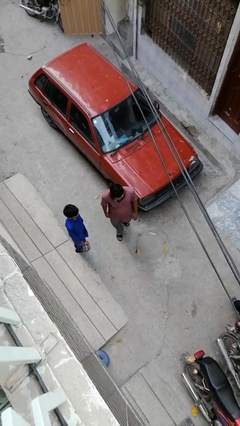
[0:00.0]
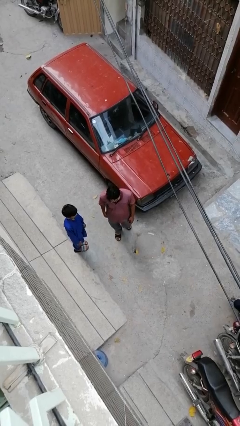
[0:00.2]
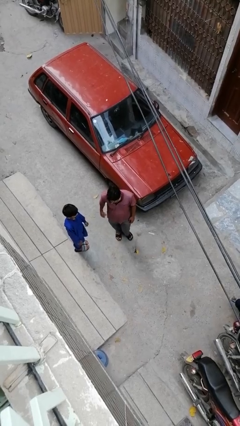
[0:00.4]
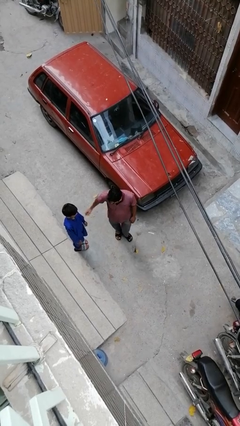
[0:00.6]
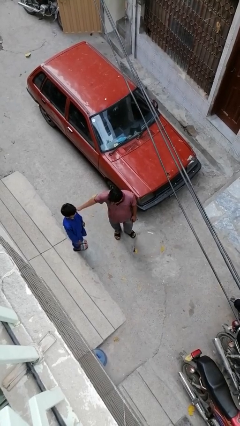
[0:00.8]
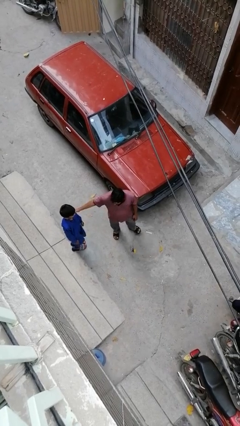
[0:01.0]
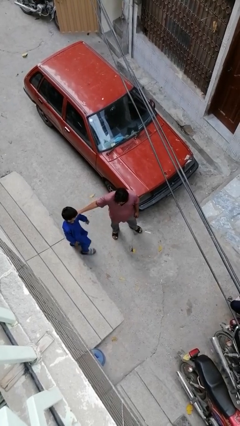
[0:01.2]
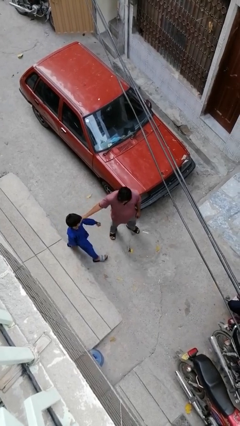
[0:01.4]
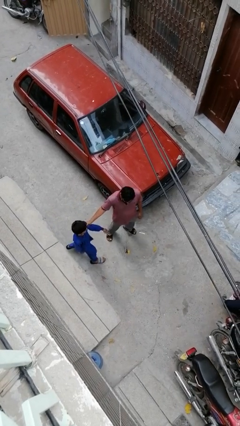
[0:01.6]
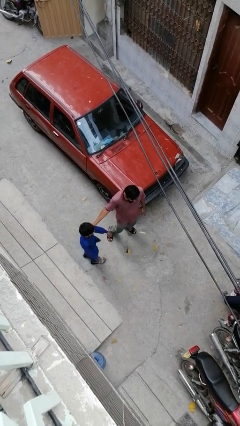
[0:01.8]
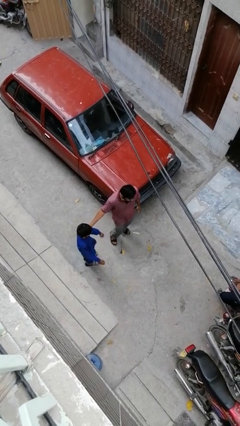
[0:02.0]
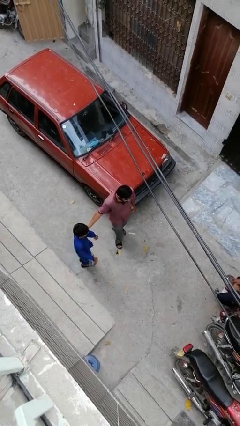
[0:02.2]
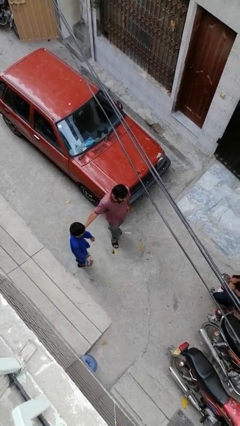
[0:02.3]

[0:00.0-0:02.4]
person grabs person by bicep

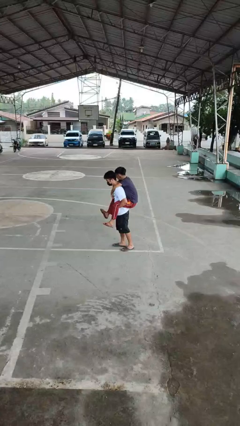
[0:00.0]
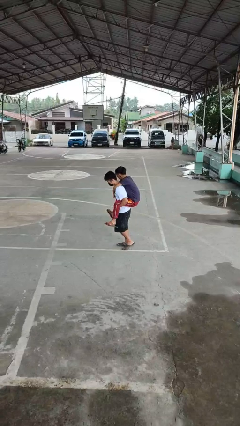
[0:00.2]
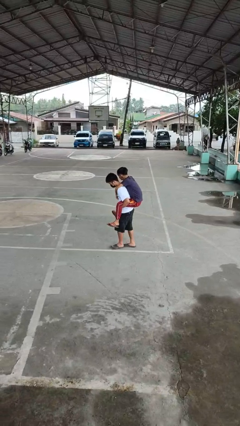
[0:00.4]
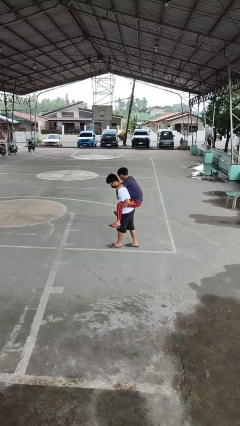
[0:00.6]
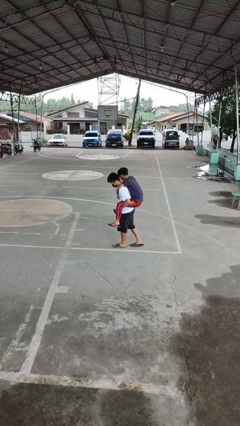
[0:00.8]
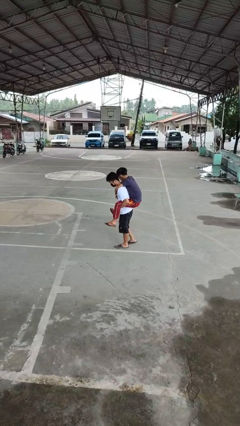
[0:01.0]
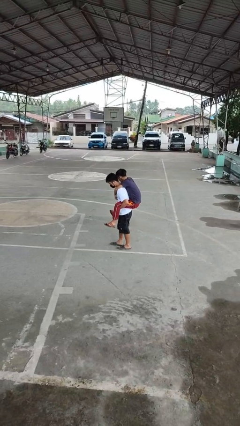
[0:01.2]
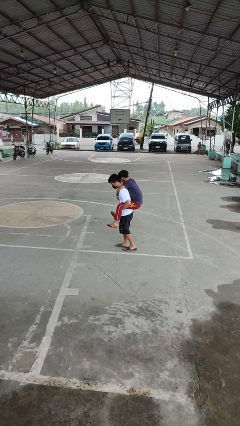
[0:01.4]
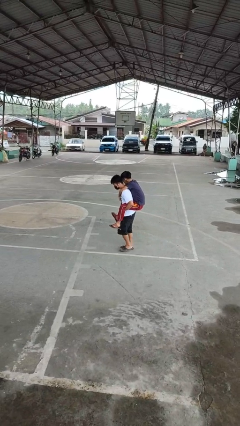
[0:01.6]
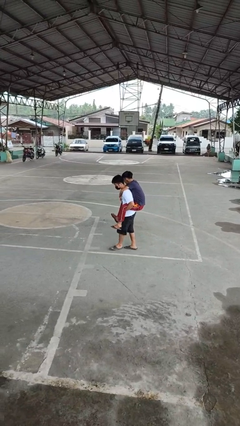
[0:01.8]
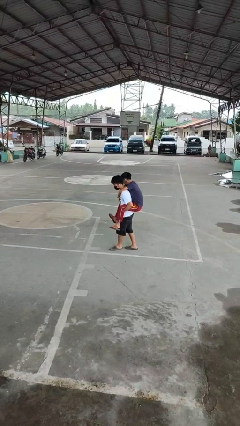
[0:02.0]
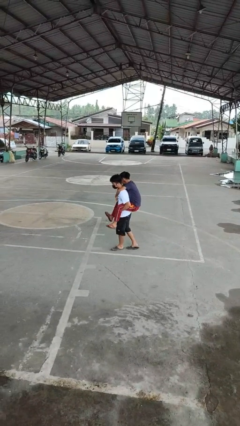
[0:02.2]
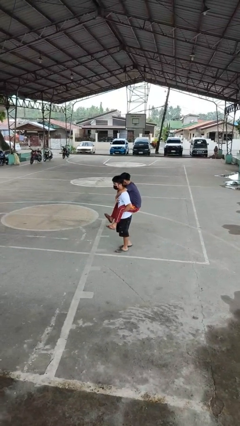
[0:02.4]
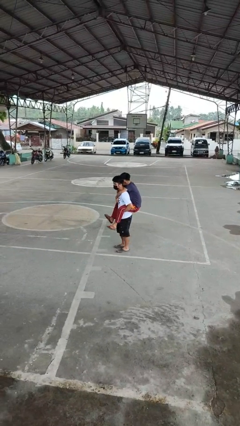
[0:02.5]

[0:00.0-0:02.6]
person carries person on back

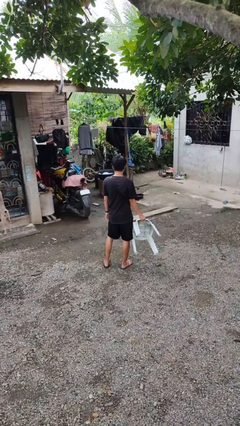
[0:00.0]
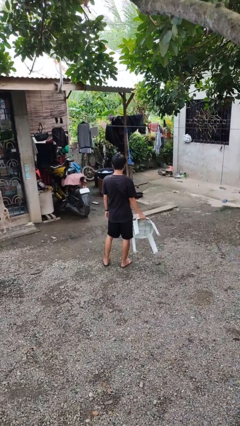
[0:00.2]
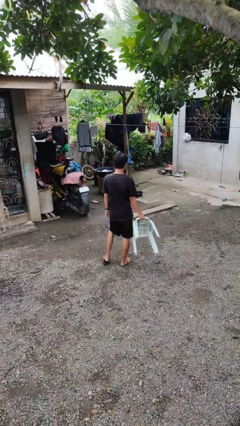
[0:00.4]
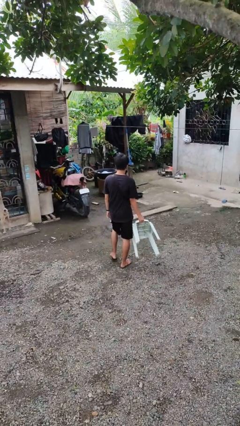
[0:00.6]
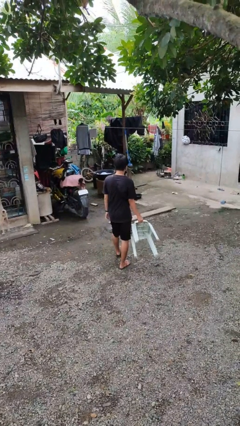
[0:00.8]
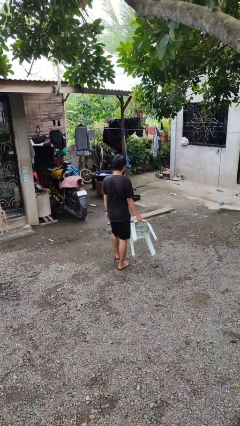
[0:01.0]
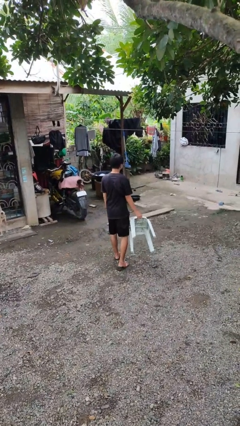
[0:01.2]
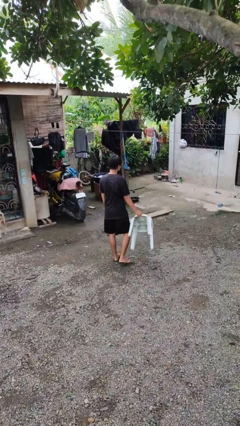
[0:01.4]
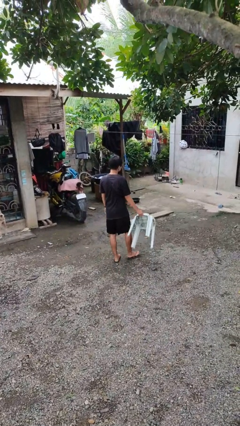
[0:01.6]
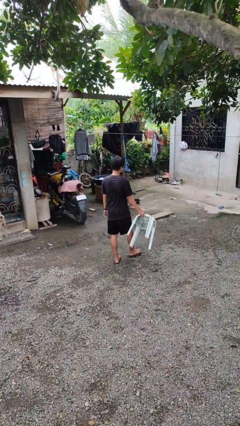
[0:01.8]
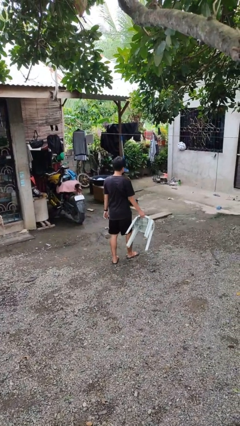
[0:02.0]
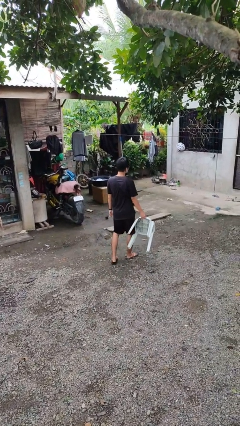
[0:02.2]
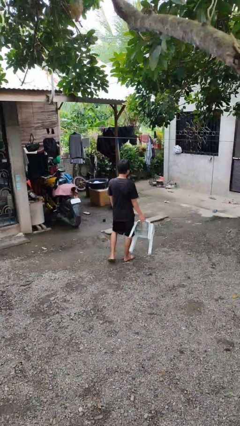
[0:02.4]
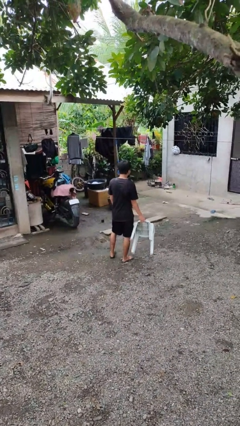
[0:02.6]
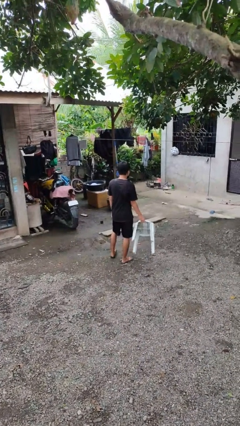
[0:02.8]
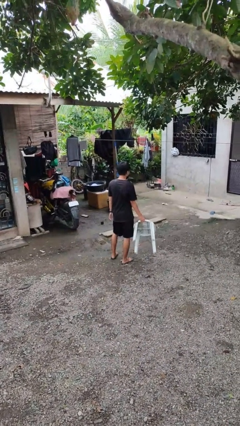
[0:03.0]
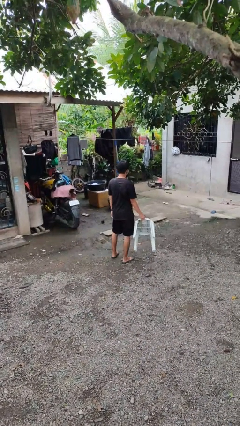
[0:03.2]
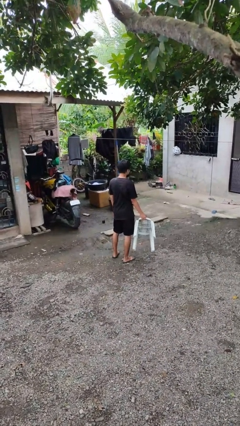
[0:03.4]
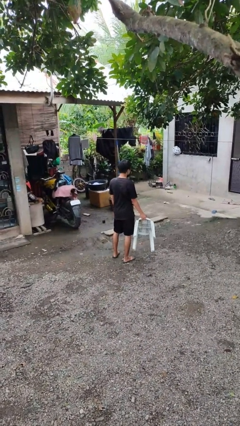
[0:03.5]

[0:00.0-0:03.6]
person carries furniture

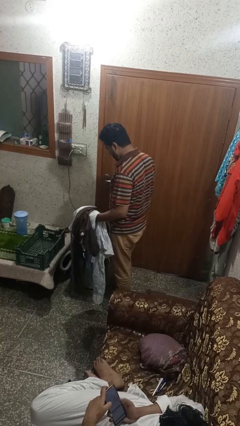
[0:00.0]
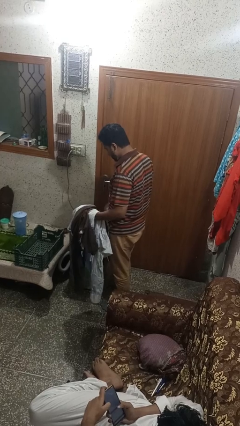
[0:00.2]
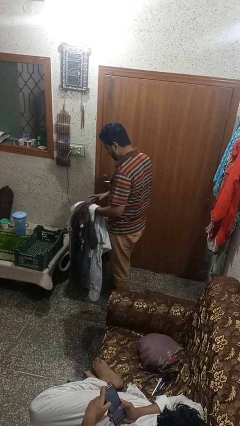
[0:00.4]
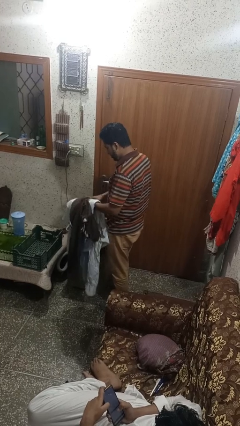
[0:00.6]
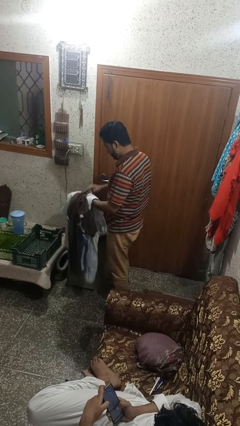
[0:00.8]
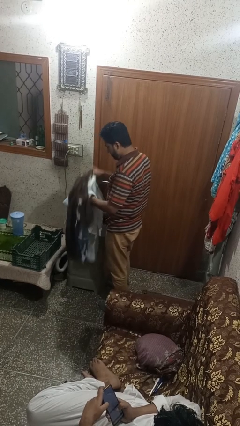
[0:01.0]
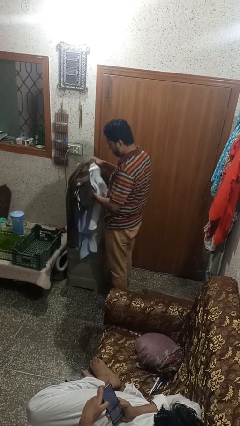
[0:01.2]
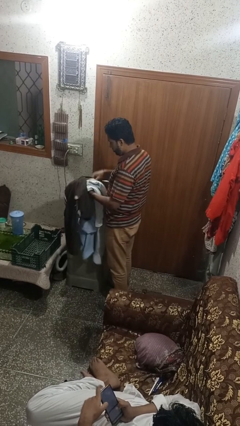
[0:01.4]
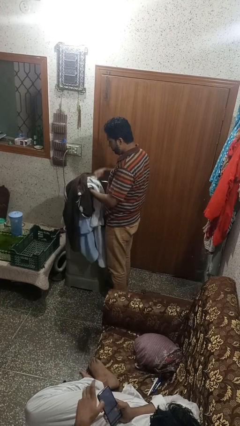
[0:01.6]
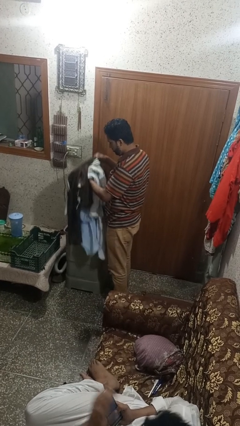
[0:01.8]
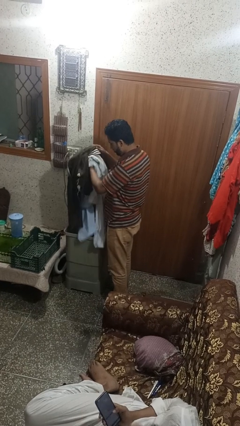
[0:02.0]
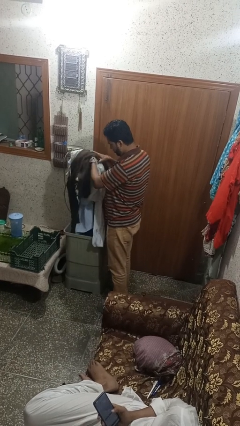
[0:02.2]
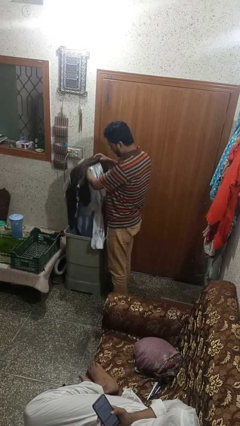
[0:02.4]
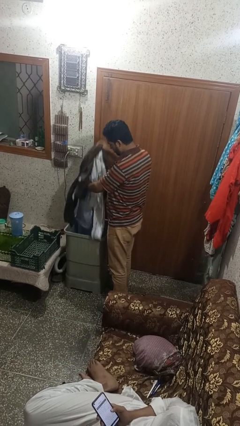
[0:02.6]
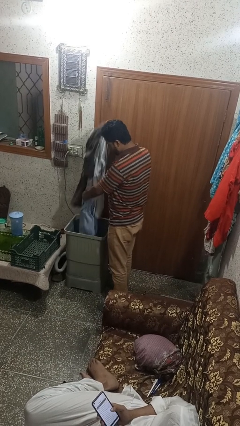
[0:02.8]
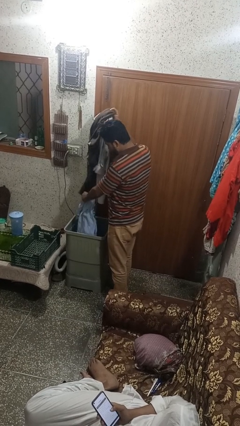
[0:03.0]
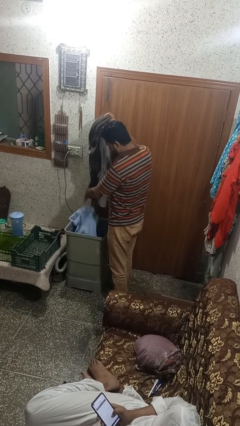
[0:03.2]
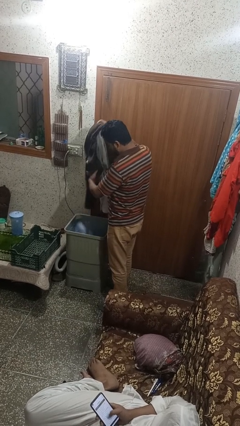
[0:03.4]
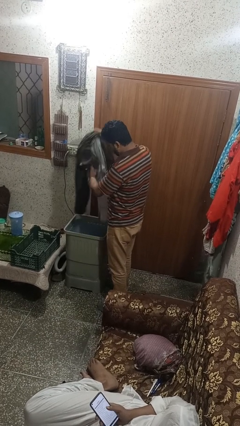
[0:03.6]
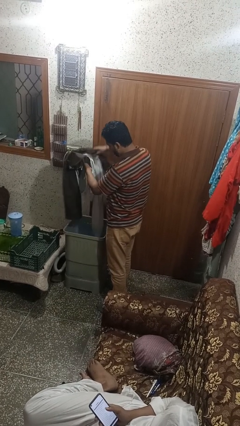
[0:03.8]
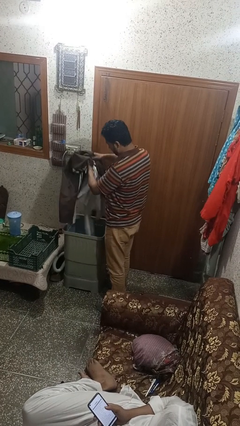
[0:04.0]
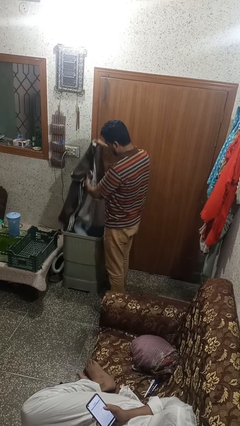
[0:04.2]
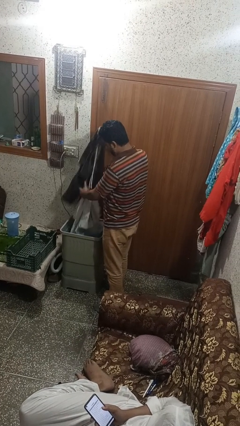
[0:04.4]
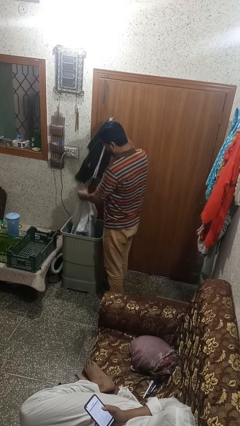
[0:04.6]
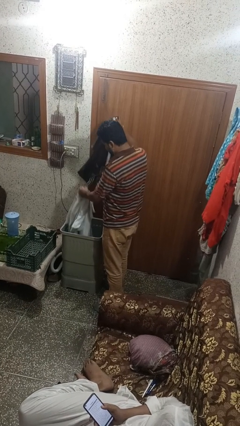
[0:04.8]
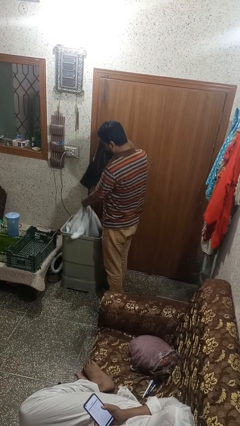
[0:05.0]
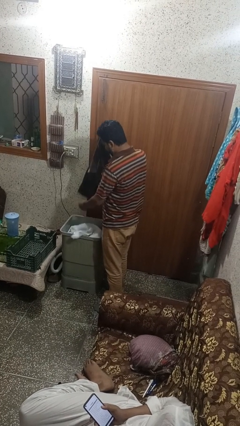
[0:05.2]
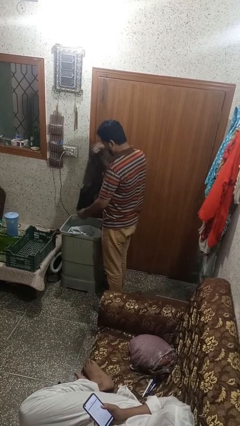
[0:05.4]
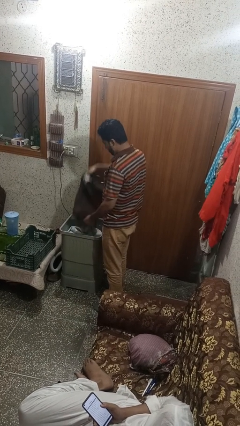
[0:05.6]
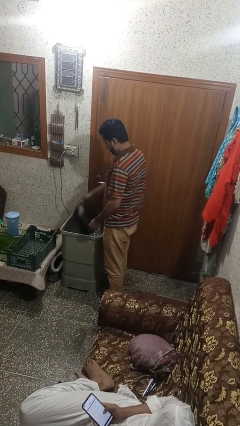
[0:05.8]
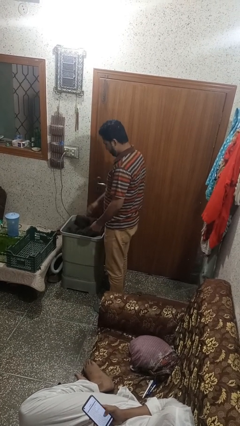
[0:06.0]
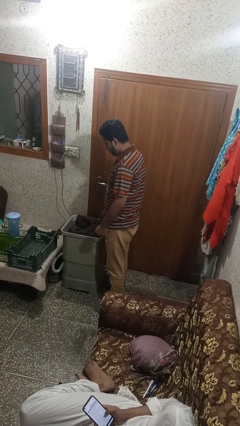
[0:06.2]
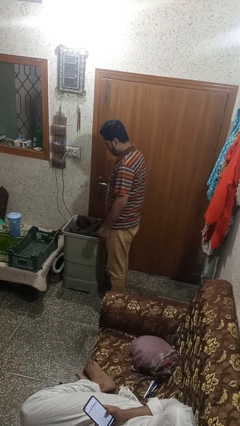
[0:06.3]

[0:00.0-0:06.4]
person loads dryer

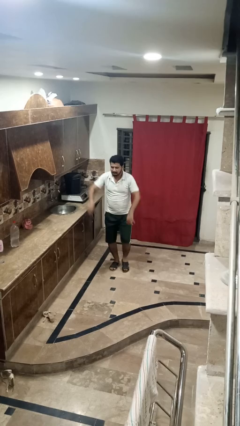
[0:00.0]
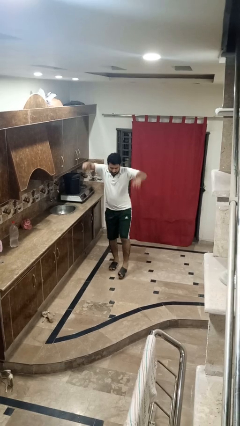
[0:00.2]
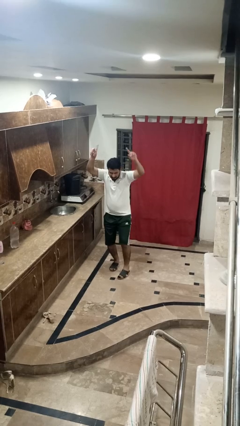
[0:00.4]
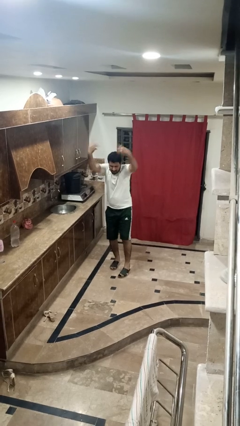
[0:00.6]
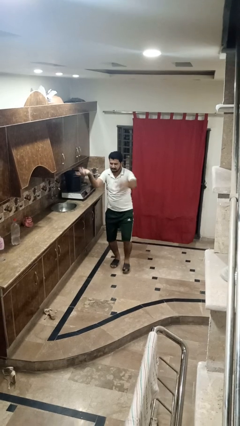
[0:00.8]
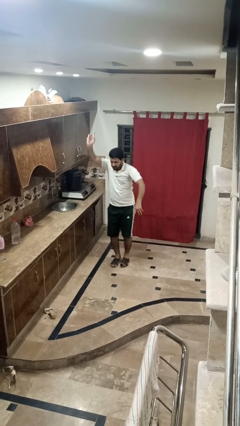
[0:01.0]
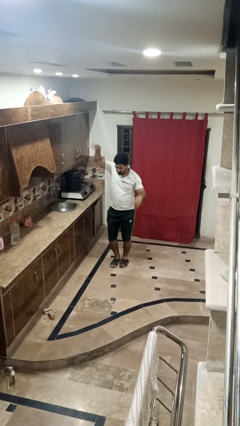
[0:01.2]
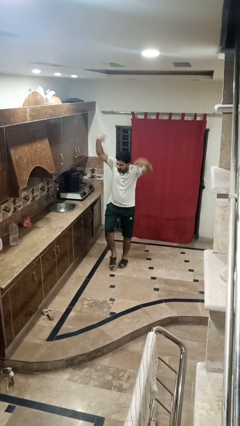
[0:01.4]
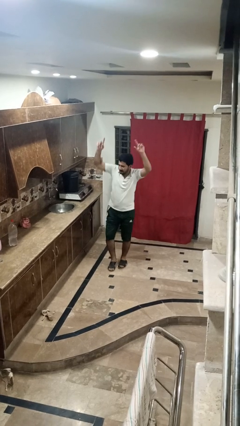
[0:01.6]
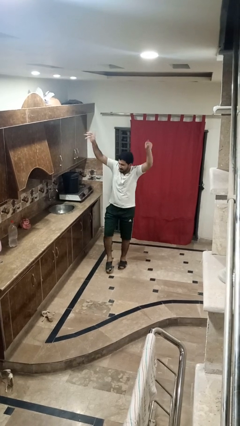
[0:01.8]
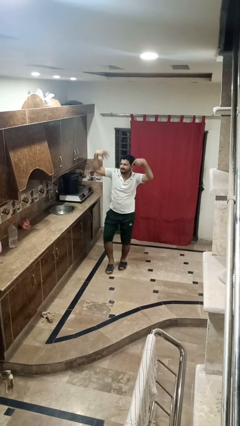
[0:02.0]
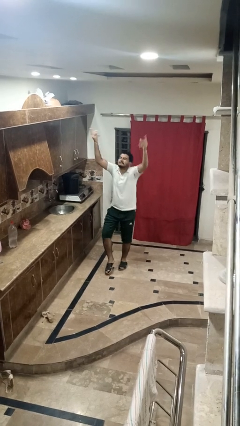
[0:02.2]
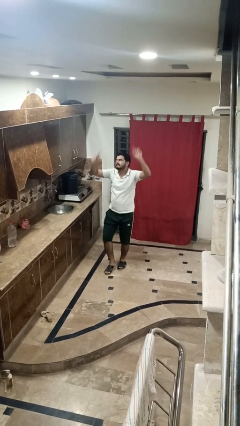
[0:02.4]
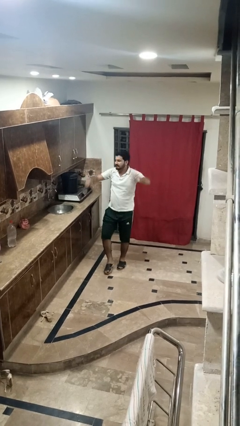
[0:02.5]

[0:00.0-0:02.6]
person dances in place

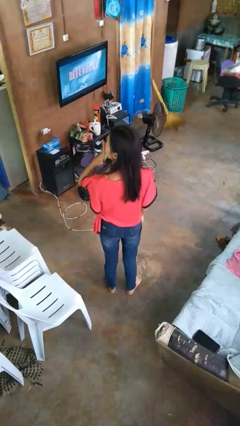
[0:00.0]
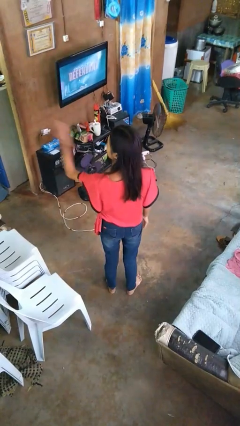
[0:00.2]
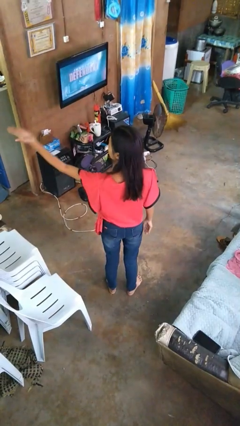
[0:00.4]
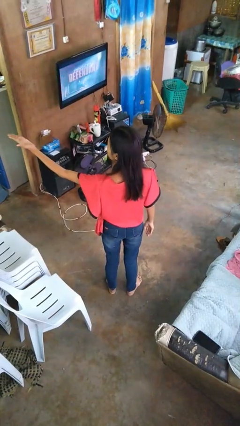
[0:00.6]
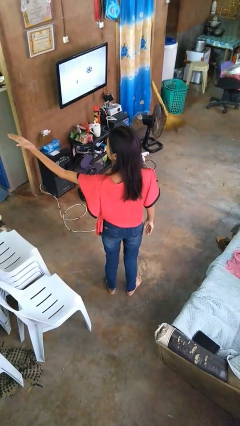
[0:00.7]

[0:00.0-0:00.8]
person gestures blow kiss
